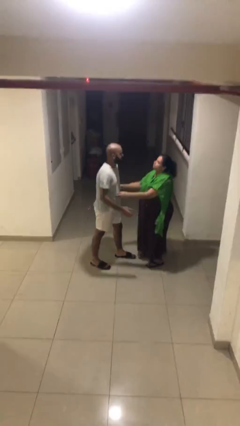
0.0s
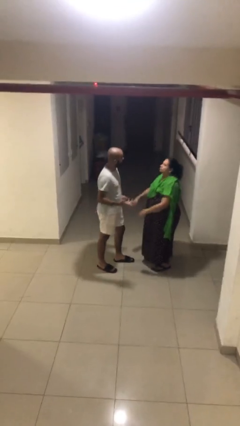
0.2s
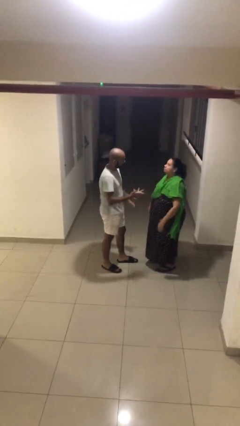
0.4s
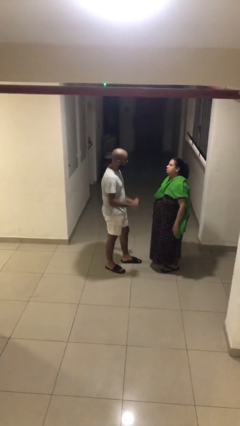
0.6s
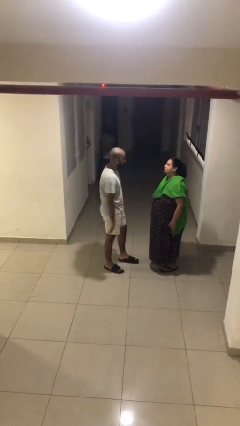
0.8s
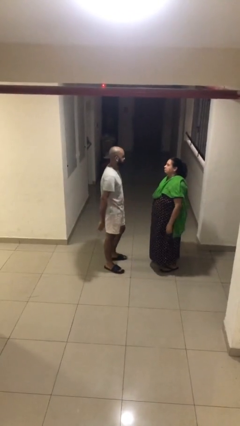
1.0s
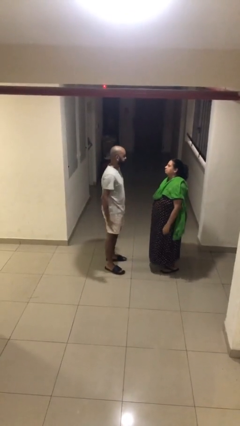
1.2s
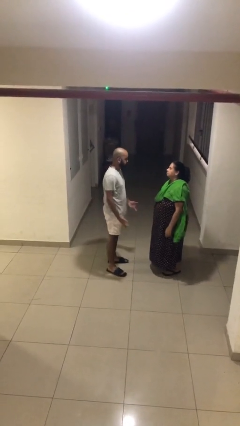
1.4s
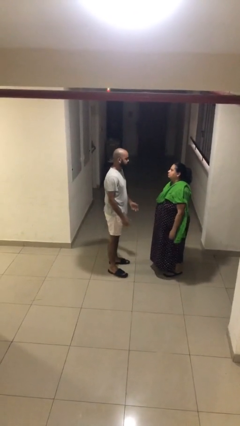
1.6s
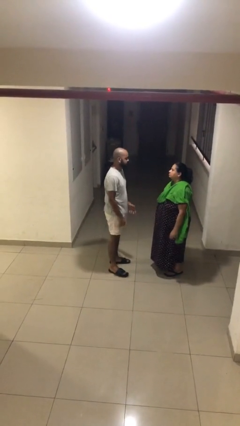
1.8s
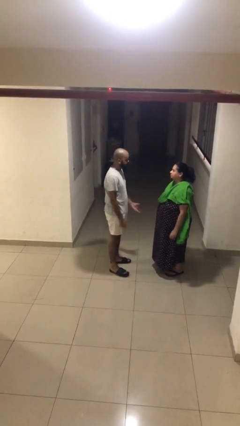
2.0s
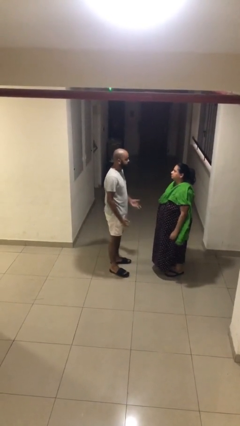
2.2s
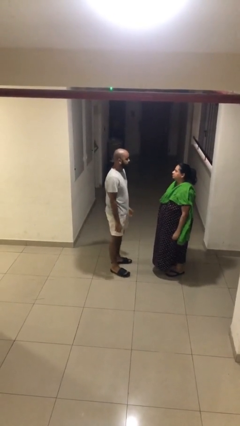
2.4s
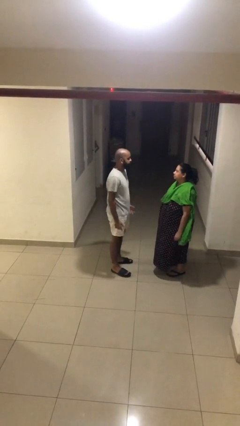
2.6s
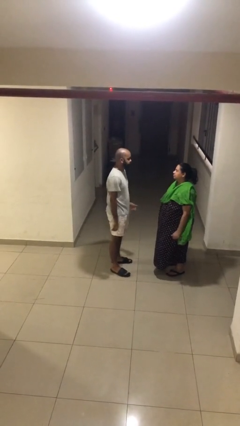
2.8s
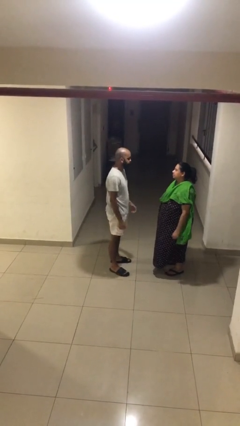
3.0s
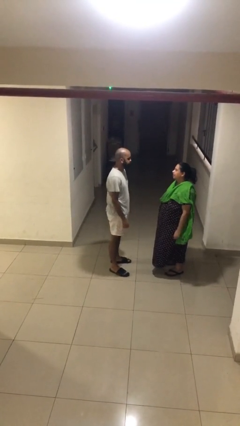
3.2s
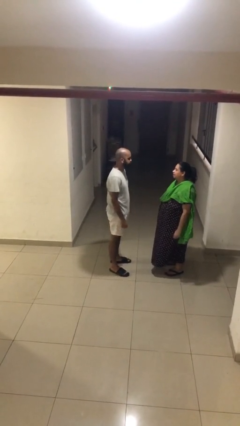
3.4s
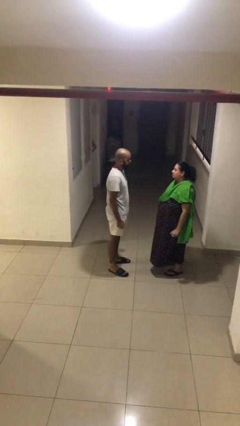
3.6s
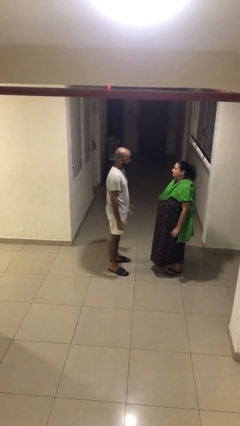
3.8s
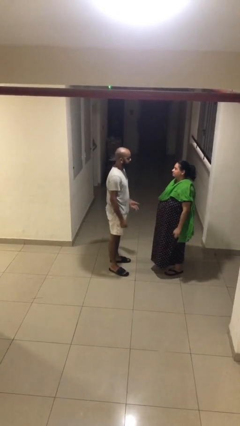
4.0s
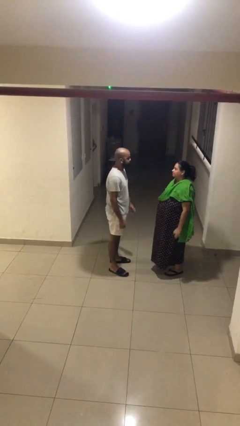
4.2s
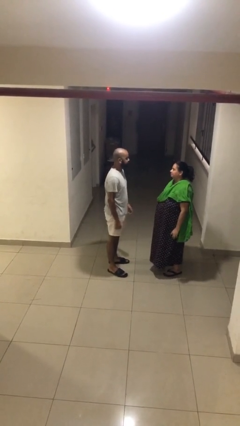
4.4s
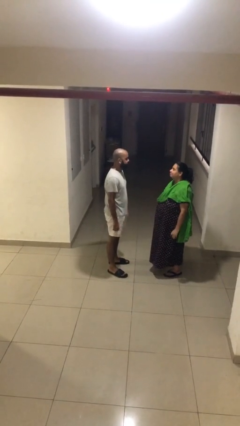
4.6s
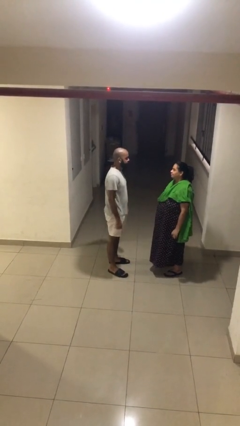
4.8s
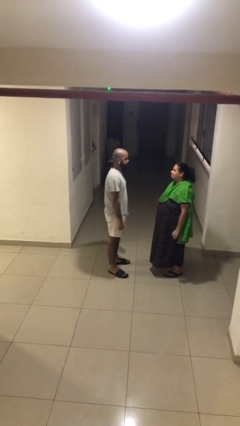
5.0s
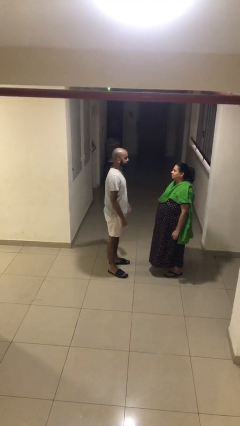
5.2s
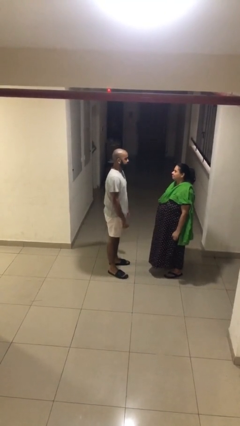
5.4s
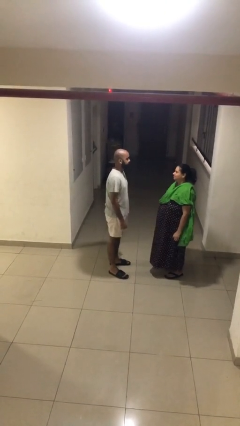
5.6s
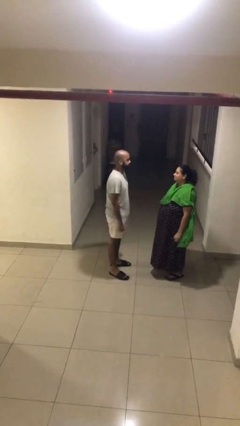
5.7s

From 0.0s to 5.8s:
person talks to person

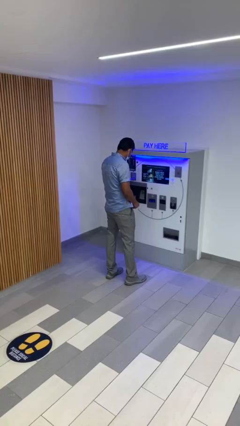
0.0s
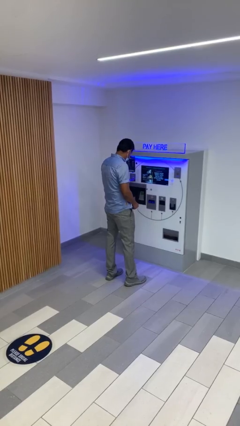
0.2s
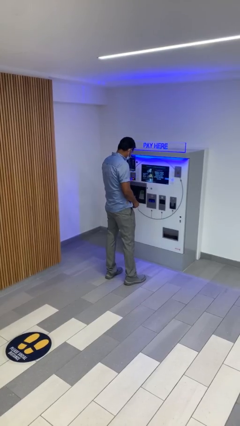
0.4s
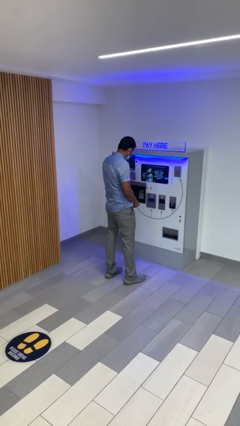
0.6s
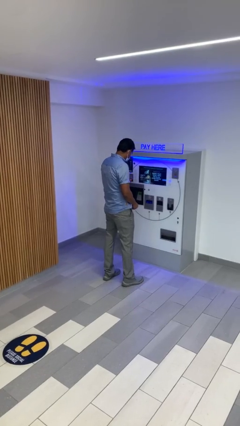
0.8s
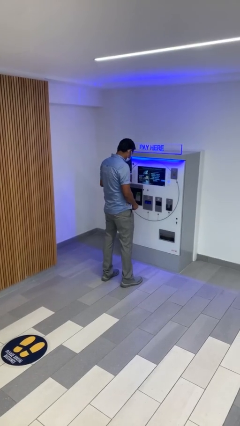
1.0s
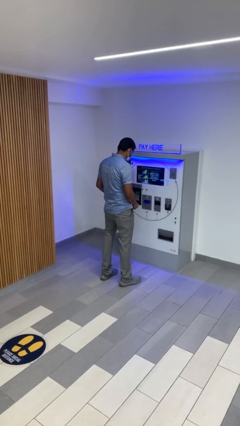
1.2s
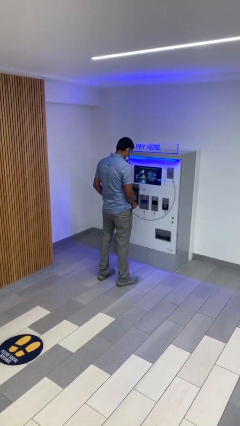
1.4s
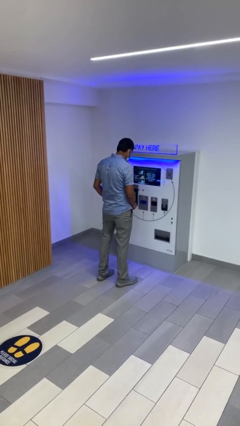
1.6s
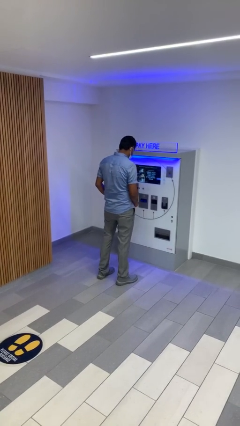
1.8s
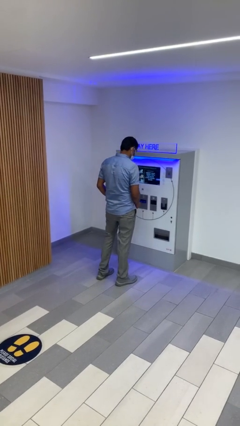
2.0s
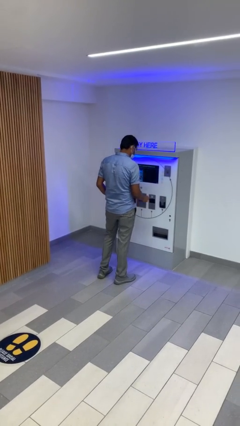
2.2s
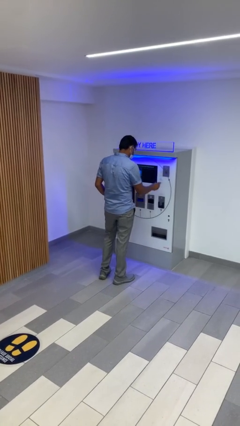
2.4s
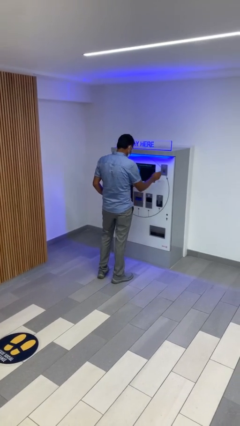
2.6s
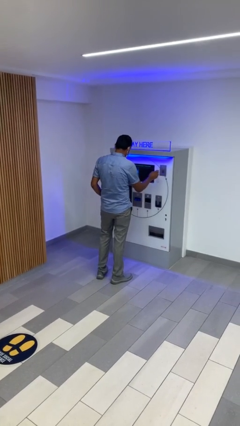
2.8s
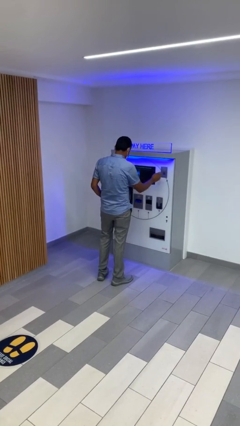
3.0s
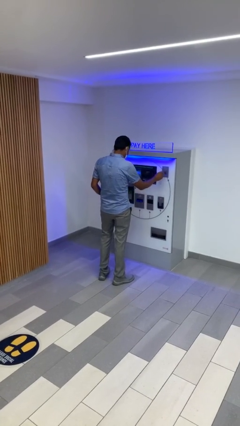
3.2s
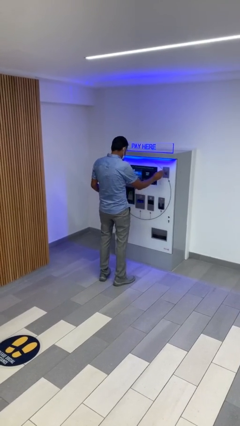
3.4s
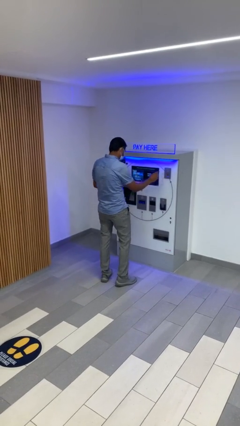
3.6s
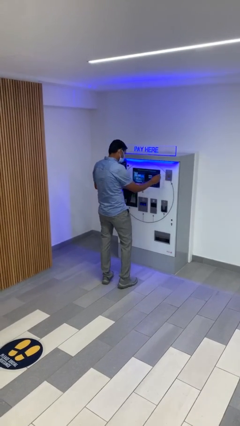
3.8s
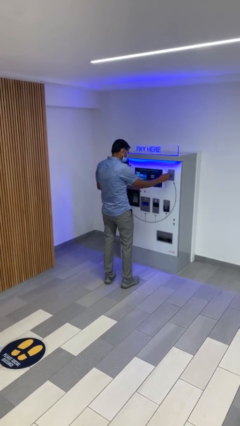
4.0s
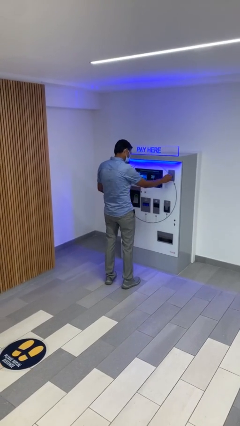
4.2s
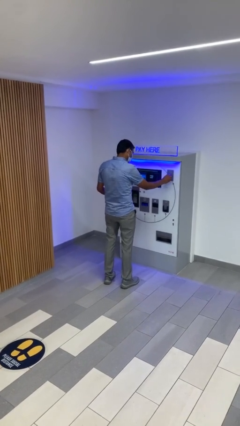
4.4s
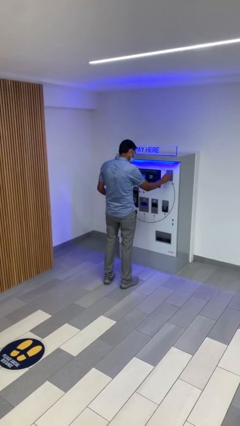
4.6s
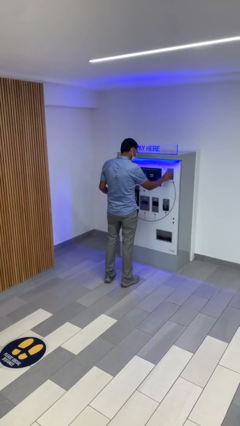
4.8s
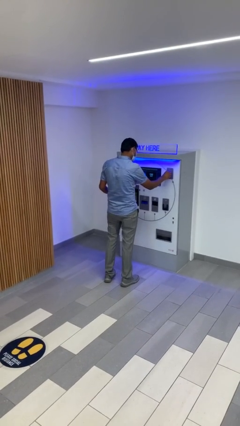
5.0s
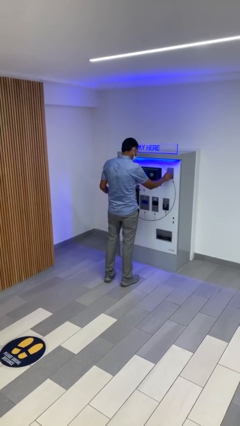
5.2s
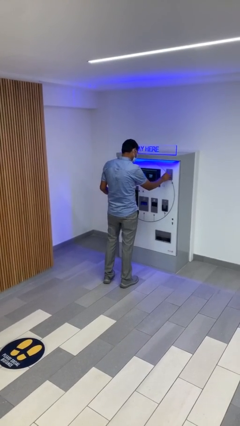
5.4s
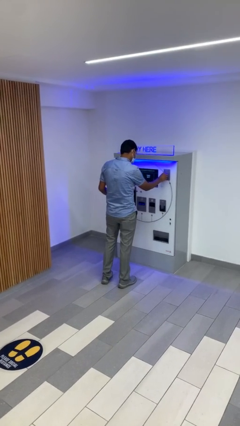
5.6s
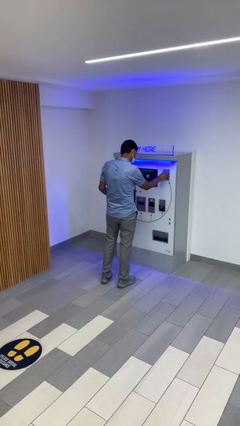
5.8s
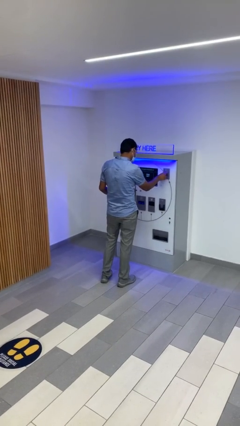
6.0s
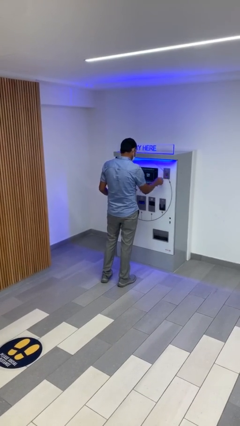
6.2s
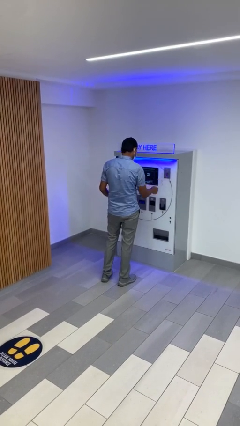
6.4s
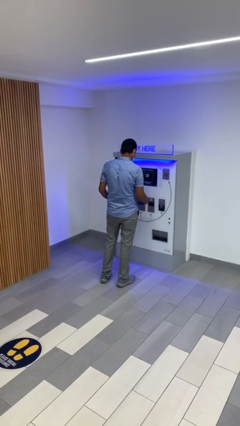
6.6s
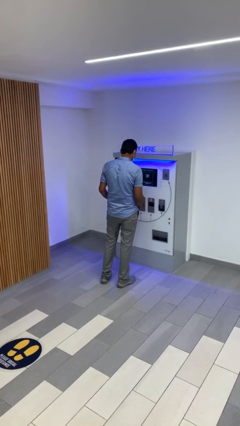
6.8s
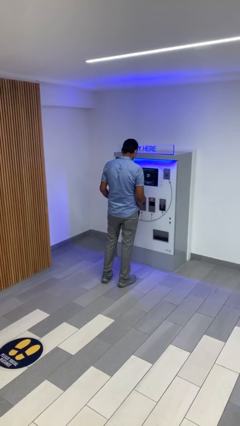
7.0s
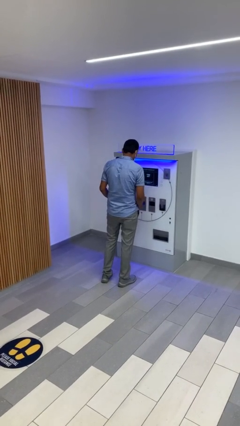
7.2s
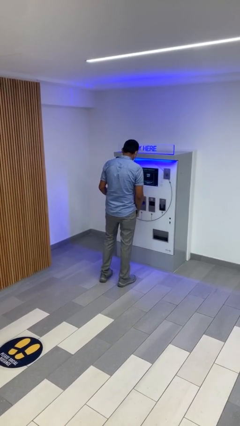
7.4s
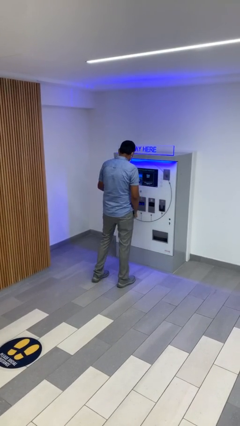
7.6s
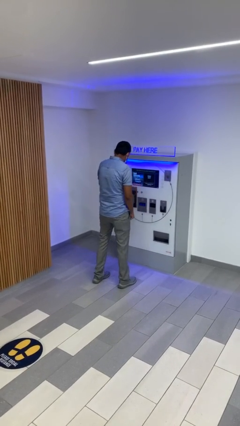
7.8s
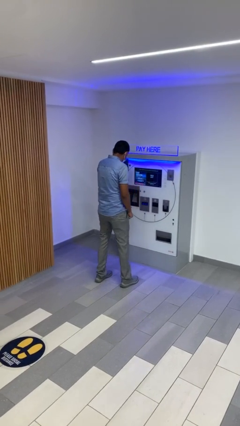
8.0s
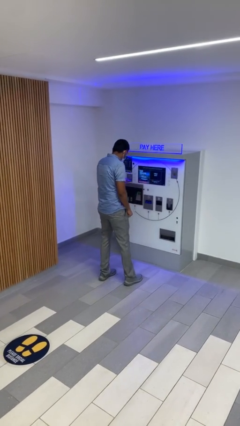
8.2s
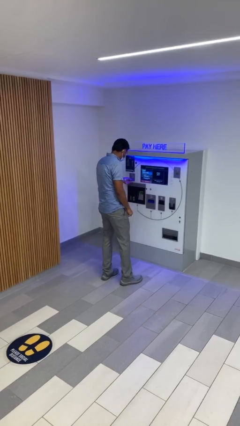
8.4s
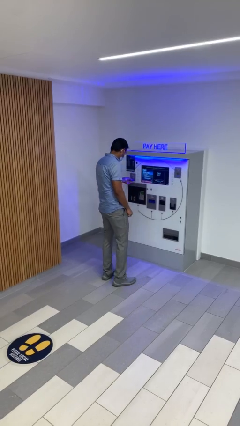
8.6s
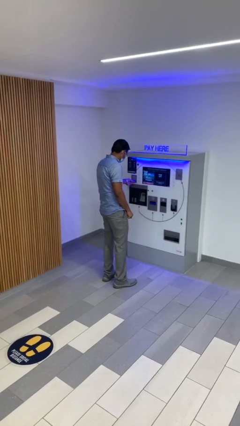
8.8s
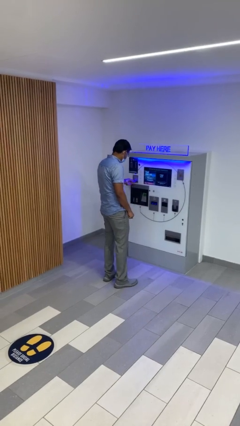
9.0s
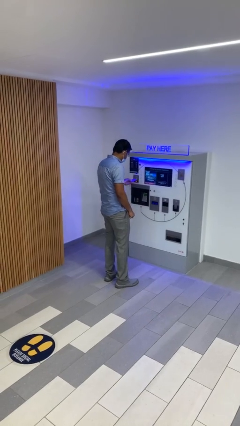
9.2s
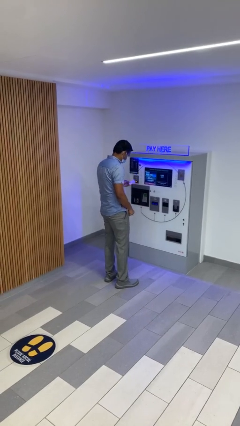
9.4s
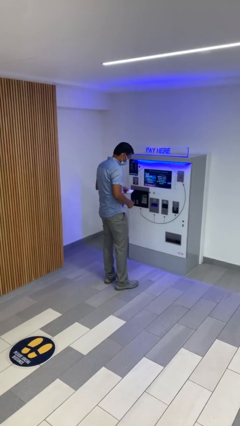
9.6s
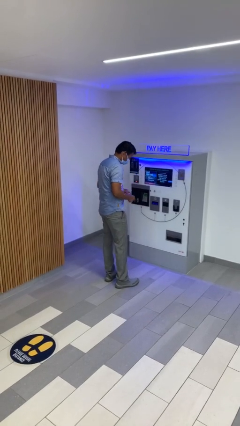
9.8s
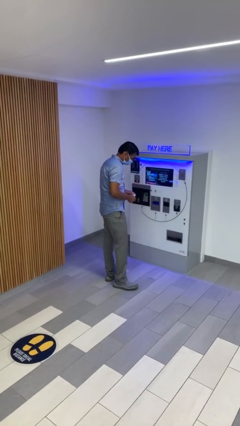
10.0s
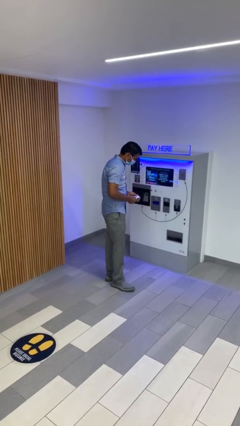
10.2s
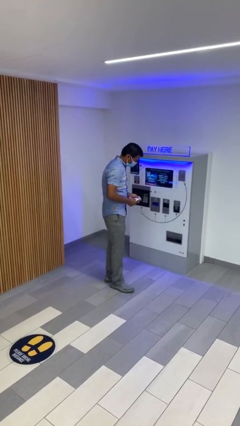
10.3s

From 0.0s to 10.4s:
person purchases from machine

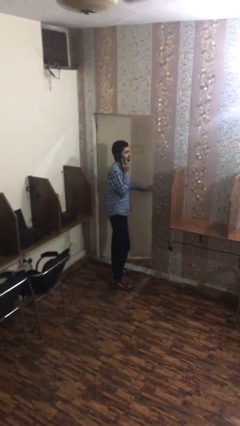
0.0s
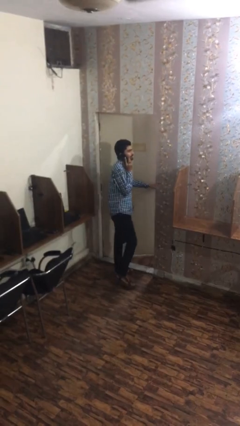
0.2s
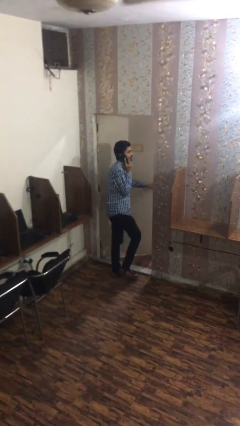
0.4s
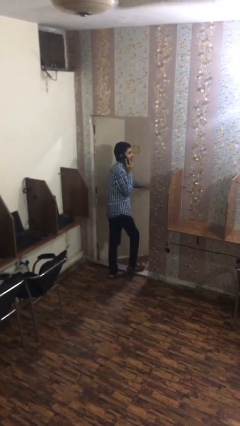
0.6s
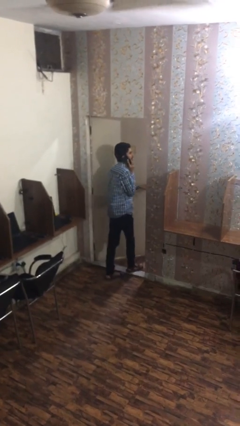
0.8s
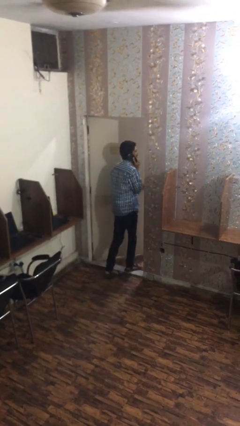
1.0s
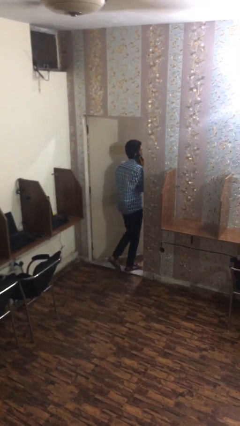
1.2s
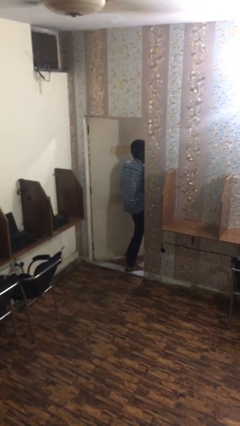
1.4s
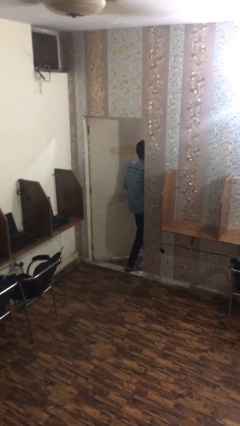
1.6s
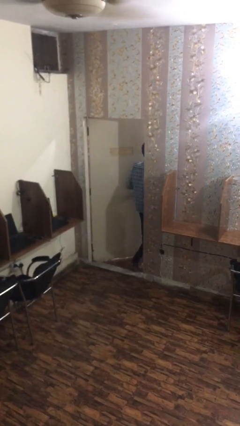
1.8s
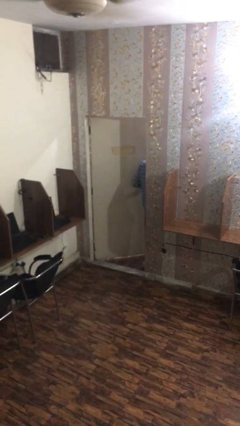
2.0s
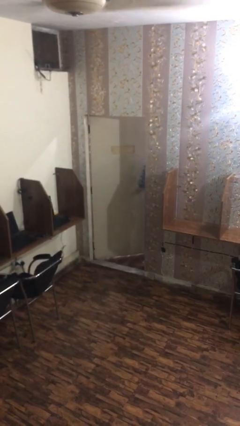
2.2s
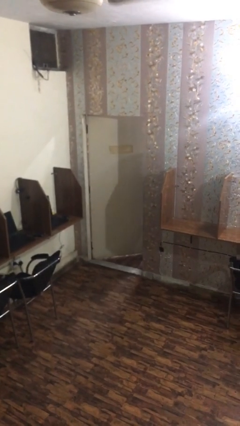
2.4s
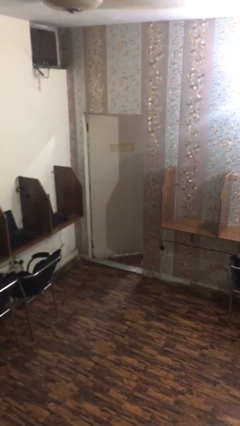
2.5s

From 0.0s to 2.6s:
person exits scene through structure
